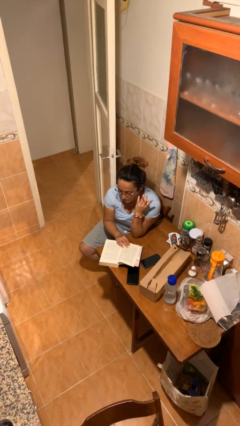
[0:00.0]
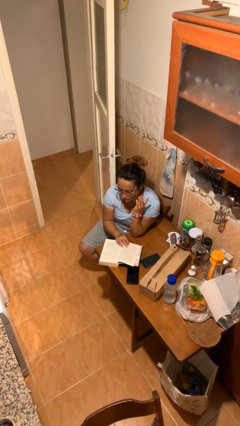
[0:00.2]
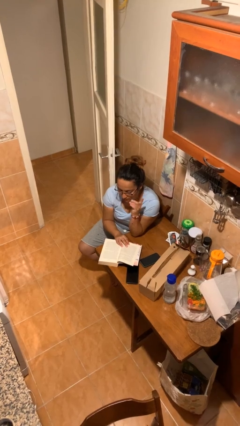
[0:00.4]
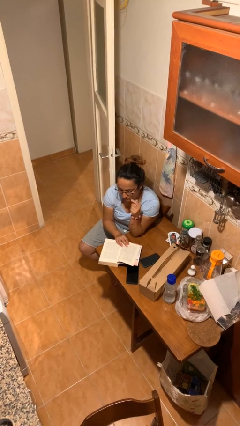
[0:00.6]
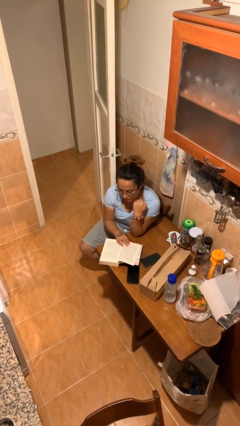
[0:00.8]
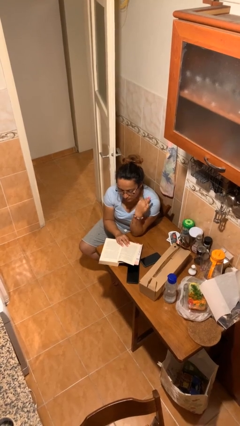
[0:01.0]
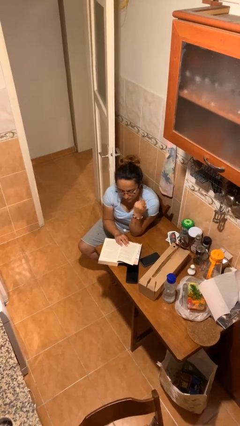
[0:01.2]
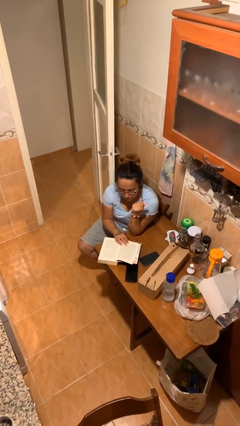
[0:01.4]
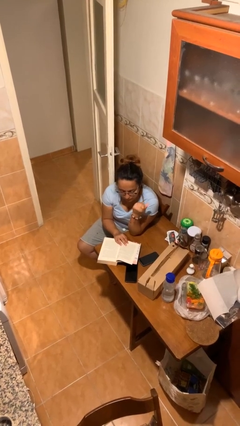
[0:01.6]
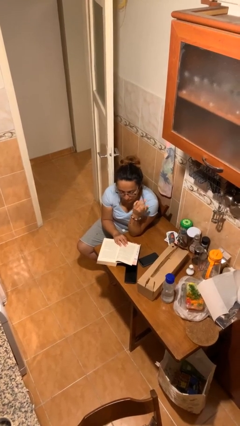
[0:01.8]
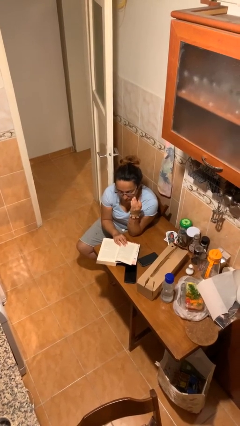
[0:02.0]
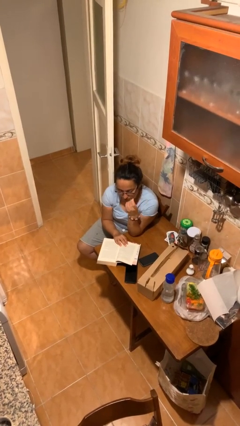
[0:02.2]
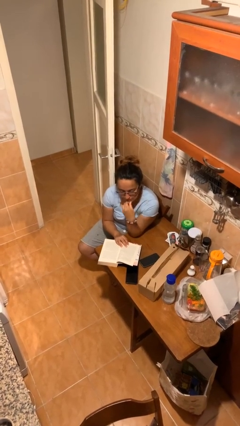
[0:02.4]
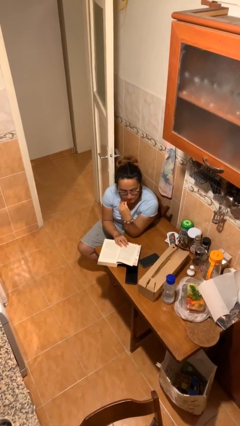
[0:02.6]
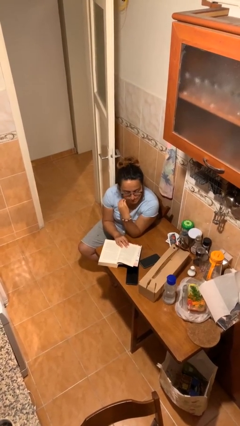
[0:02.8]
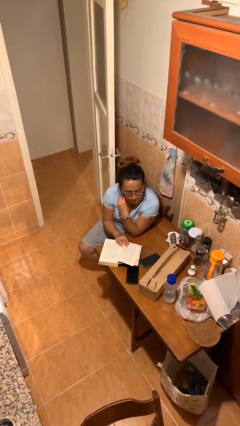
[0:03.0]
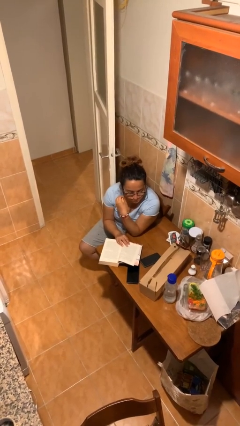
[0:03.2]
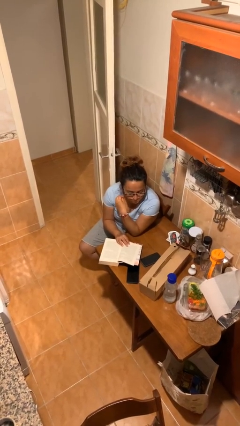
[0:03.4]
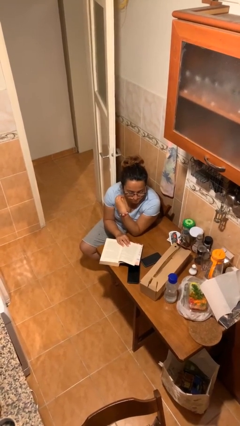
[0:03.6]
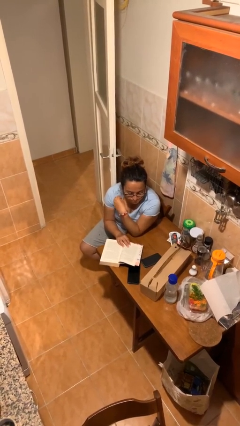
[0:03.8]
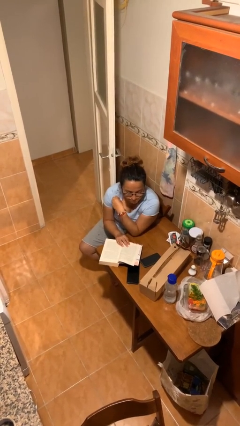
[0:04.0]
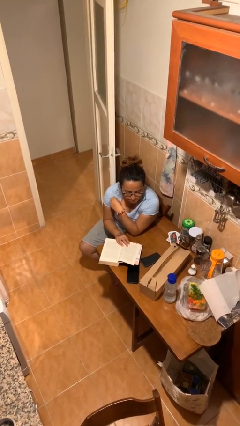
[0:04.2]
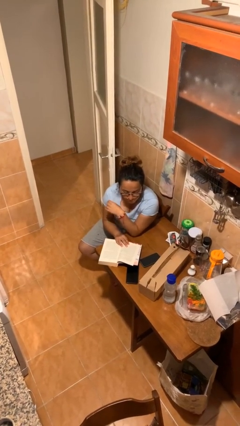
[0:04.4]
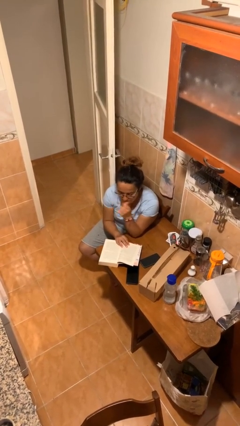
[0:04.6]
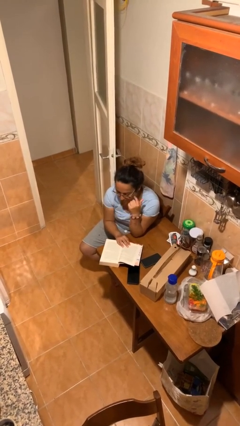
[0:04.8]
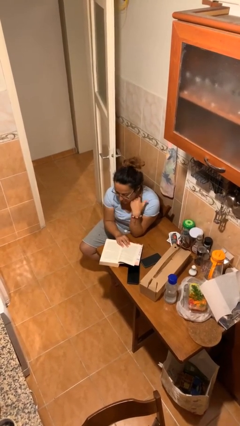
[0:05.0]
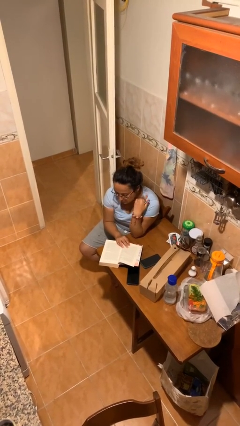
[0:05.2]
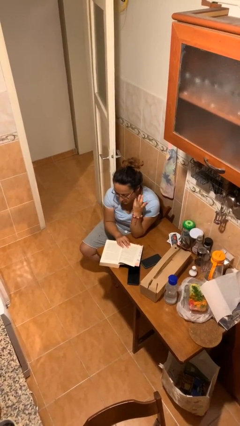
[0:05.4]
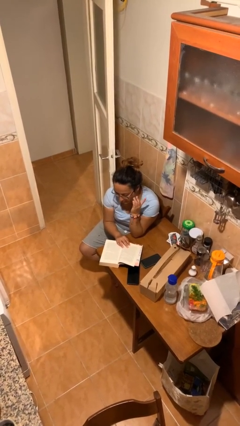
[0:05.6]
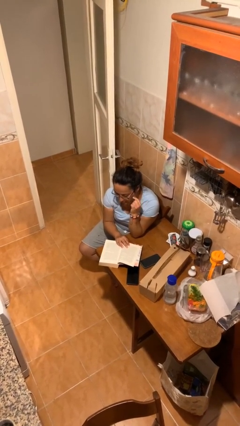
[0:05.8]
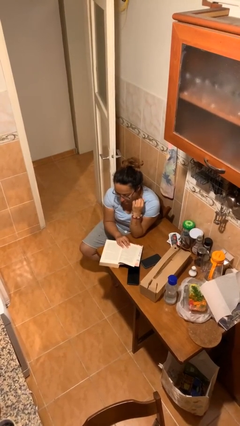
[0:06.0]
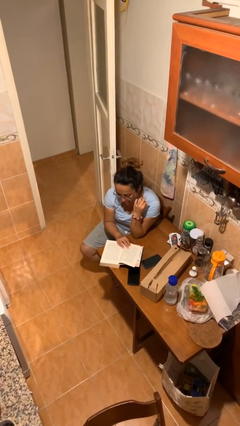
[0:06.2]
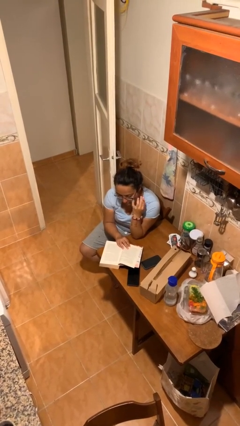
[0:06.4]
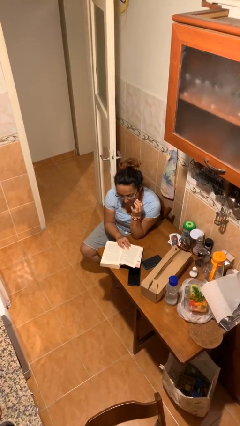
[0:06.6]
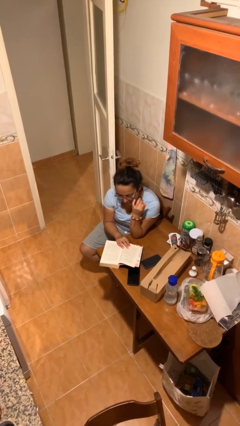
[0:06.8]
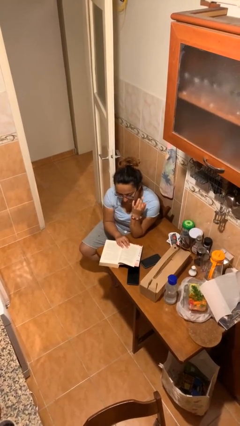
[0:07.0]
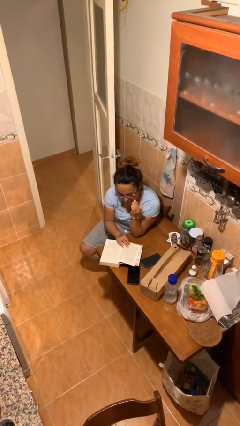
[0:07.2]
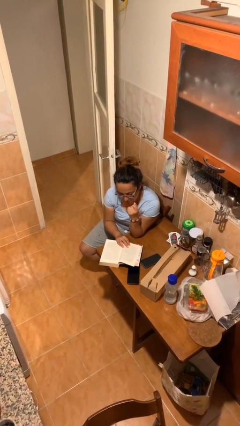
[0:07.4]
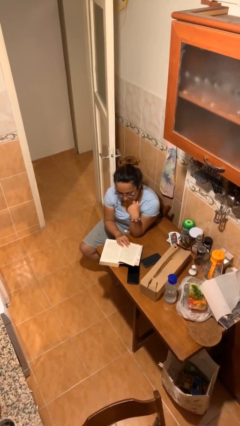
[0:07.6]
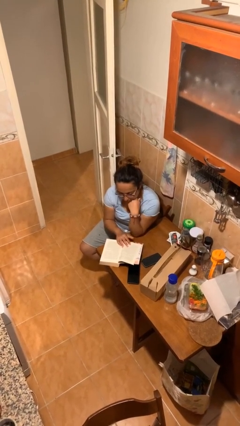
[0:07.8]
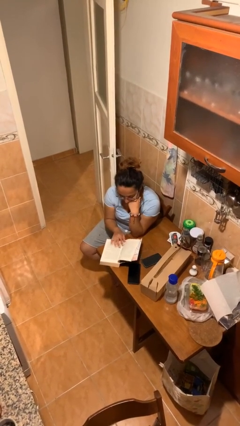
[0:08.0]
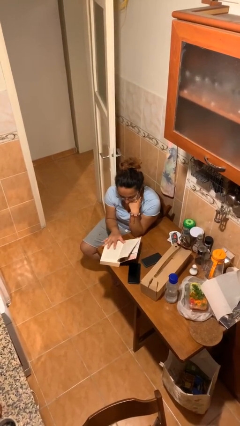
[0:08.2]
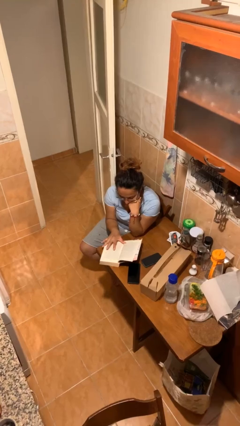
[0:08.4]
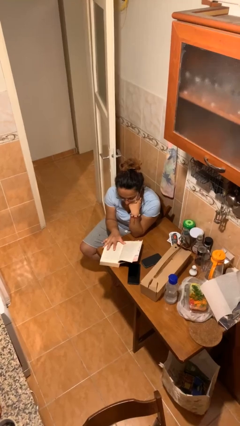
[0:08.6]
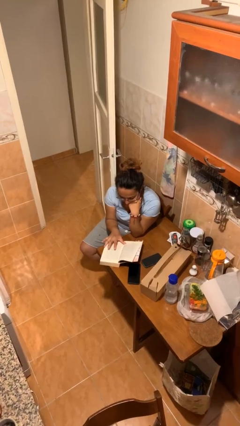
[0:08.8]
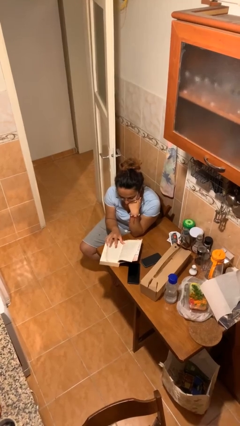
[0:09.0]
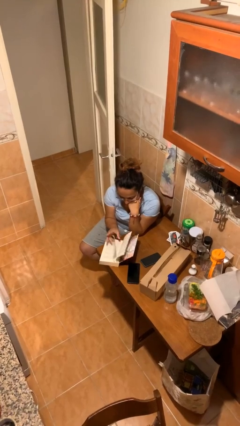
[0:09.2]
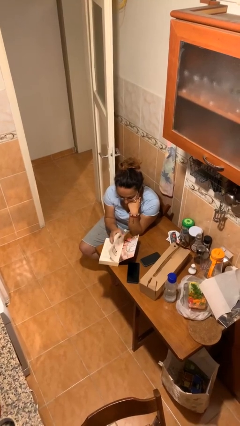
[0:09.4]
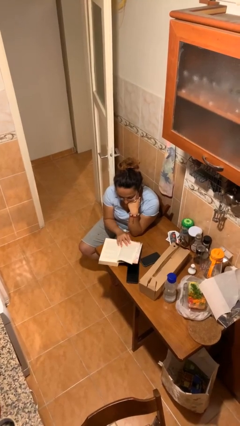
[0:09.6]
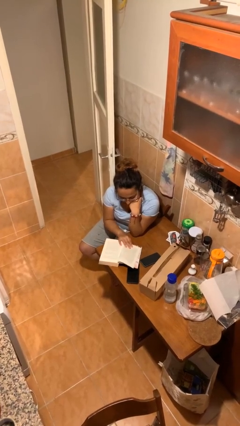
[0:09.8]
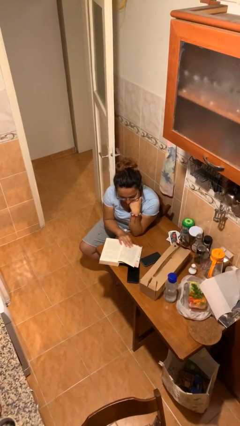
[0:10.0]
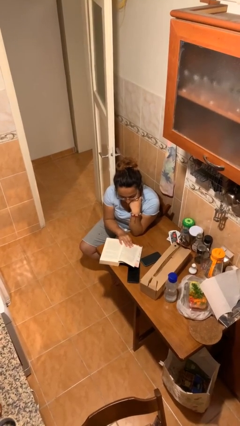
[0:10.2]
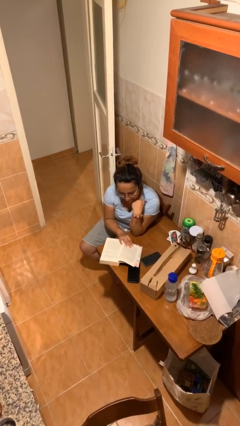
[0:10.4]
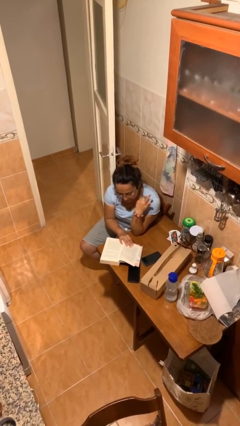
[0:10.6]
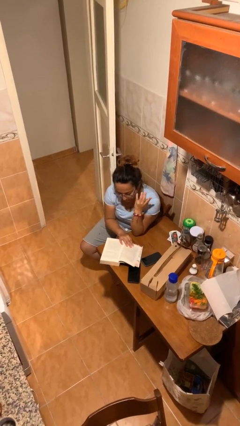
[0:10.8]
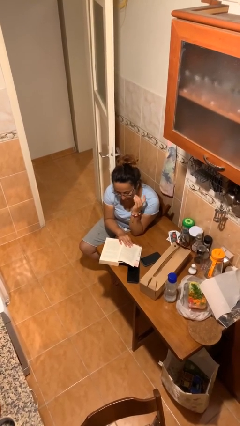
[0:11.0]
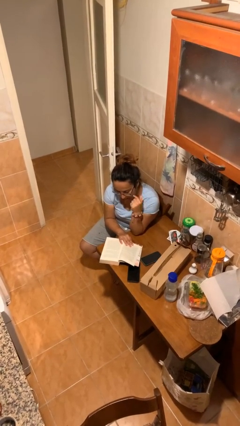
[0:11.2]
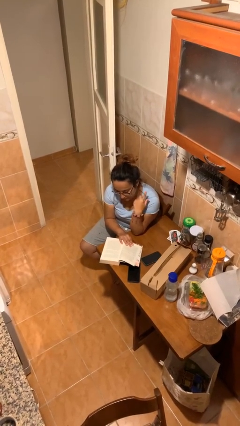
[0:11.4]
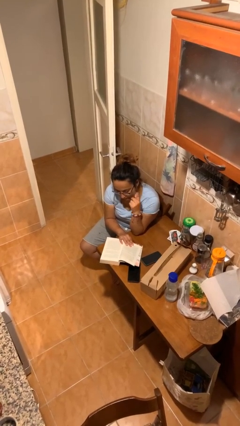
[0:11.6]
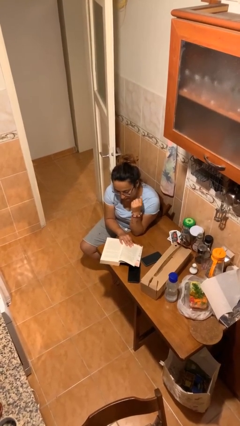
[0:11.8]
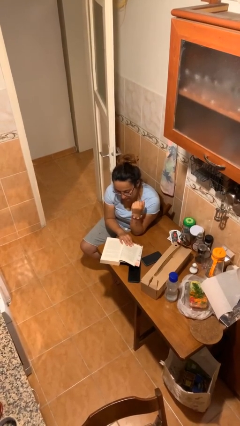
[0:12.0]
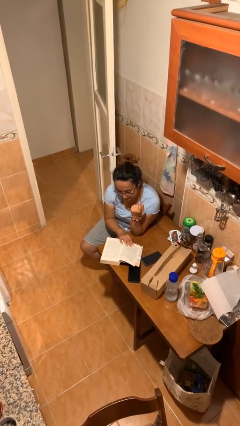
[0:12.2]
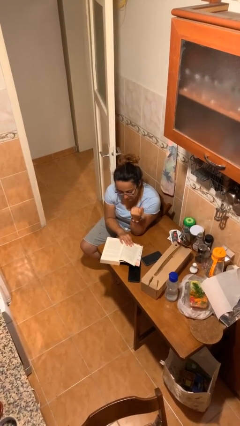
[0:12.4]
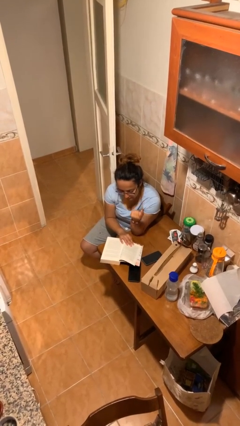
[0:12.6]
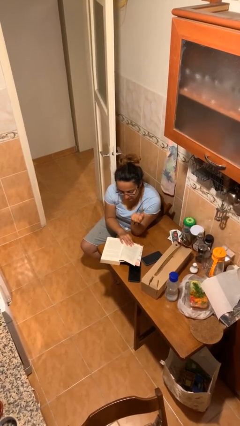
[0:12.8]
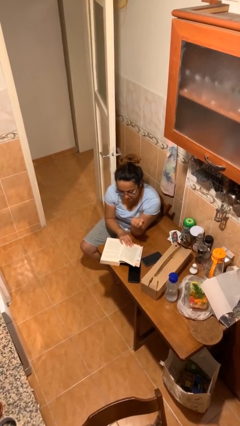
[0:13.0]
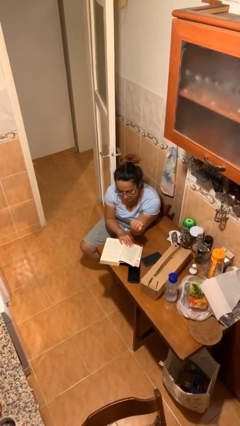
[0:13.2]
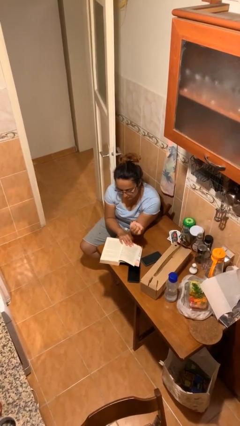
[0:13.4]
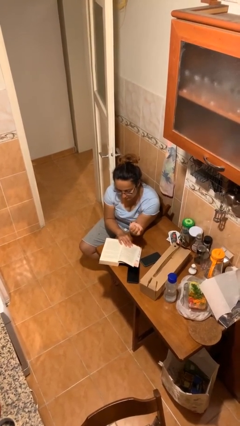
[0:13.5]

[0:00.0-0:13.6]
person reads document

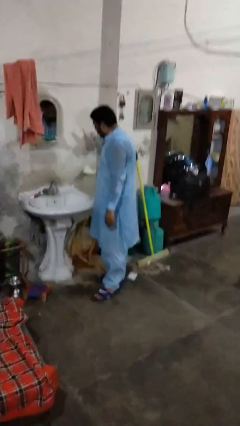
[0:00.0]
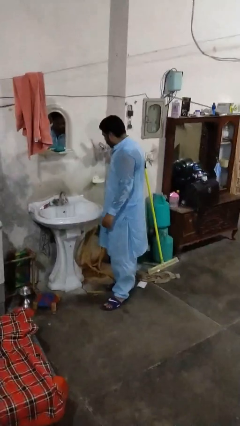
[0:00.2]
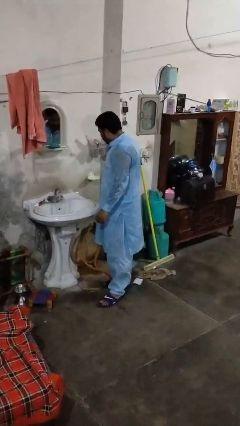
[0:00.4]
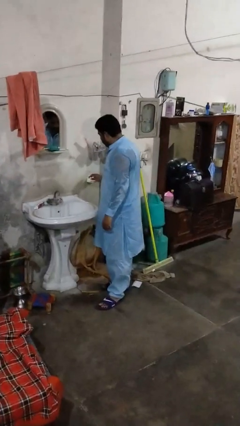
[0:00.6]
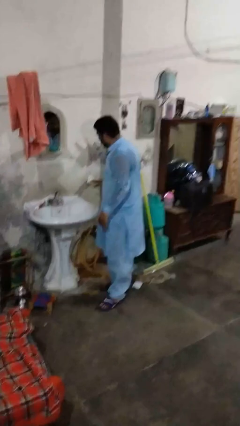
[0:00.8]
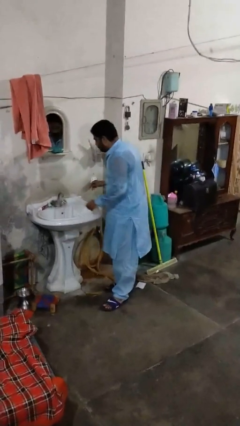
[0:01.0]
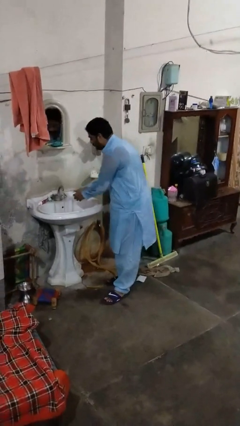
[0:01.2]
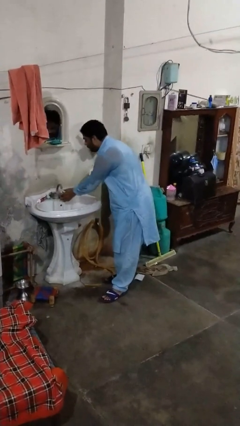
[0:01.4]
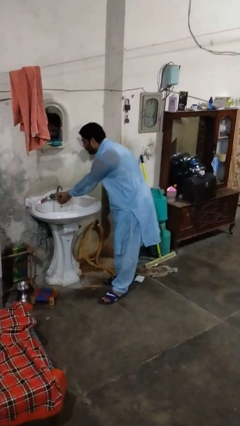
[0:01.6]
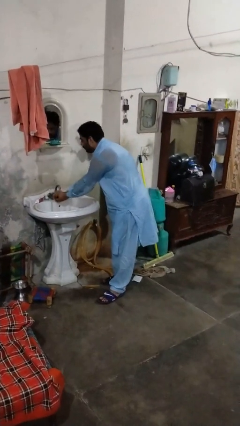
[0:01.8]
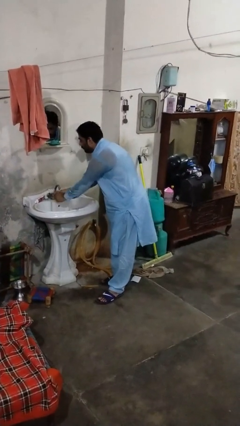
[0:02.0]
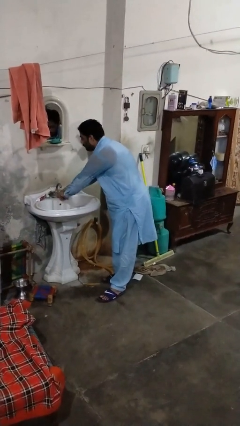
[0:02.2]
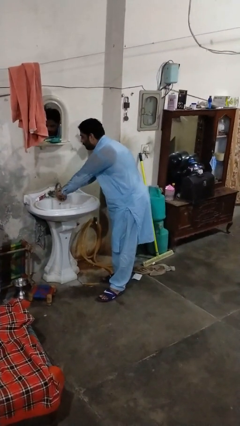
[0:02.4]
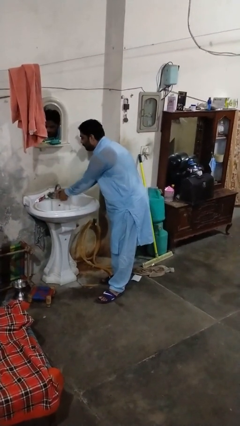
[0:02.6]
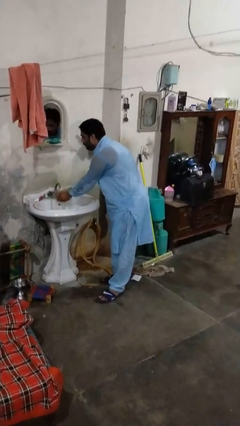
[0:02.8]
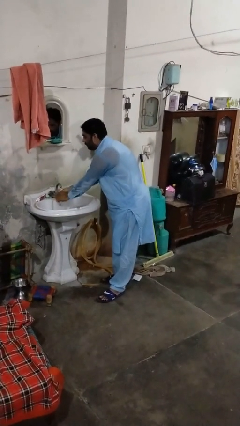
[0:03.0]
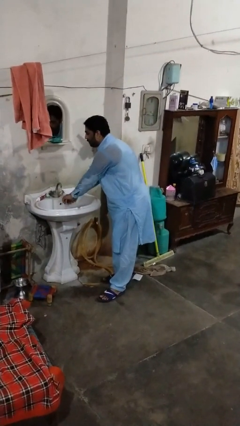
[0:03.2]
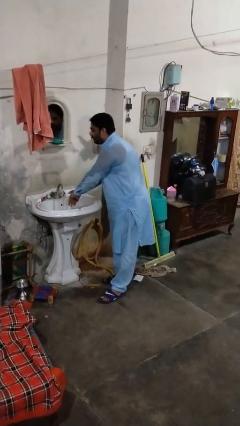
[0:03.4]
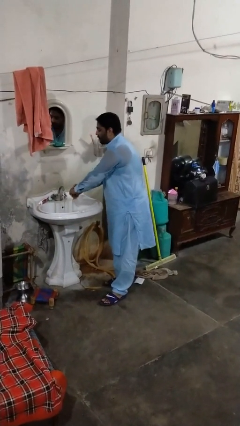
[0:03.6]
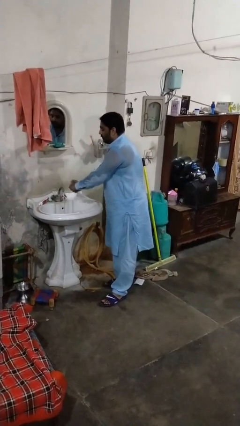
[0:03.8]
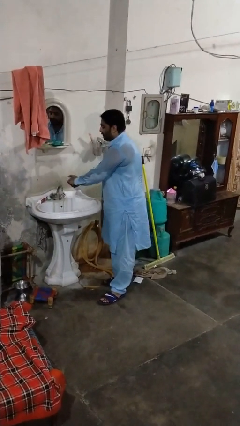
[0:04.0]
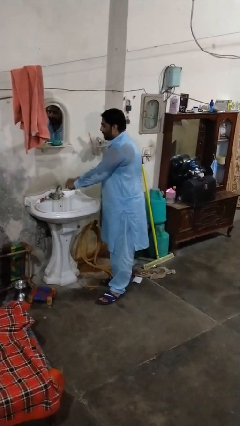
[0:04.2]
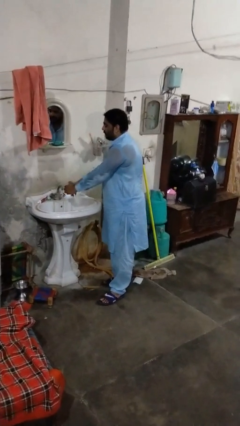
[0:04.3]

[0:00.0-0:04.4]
person washes hands

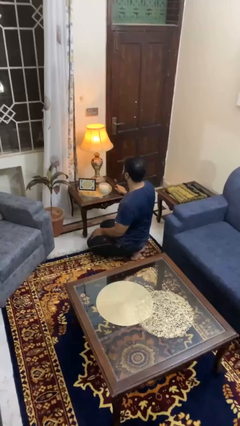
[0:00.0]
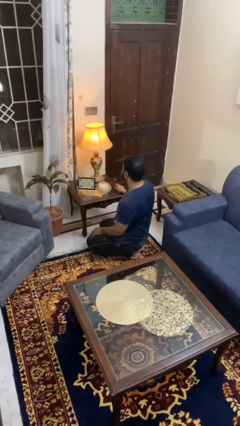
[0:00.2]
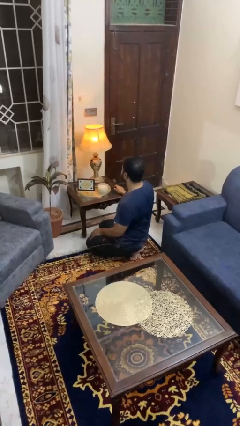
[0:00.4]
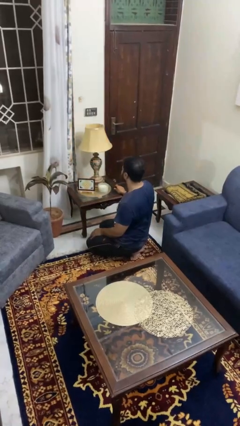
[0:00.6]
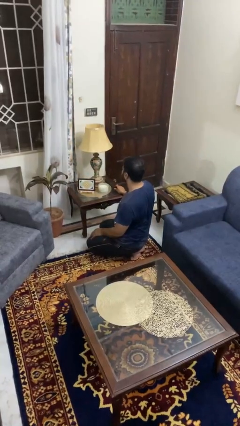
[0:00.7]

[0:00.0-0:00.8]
person turns off lamp
